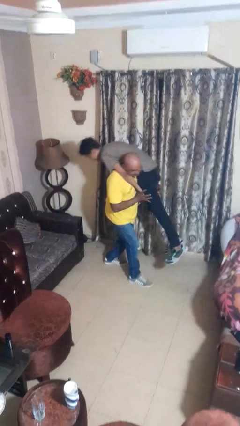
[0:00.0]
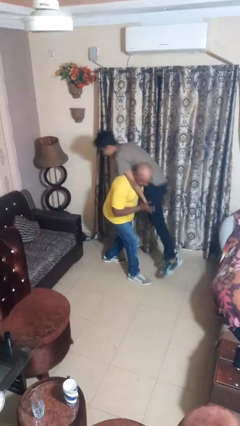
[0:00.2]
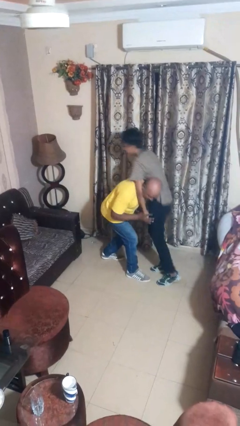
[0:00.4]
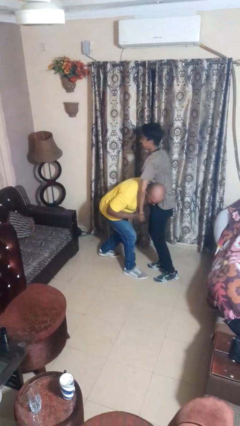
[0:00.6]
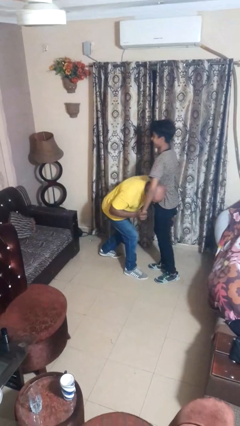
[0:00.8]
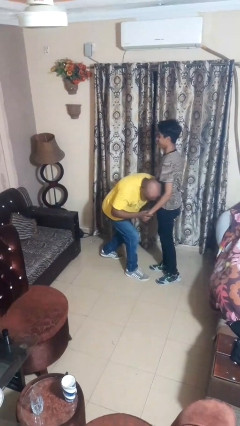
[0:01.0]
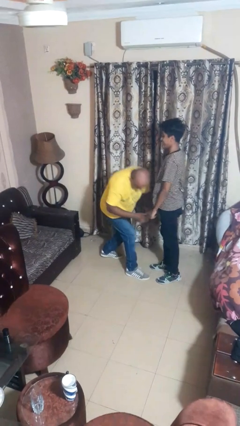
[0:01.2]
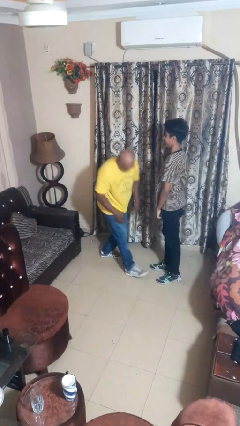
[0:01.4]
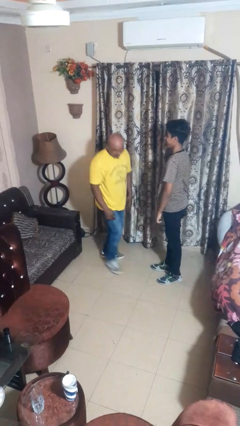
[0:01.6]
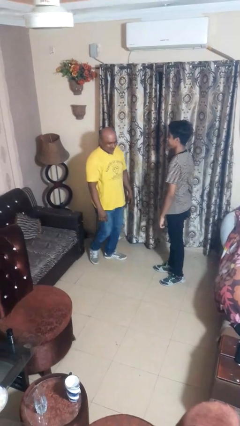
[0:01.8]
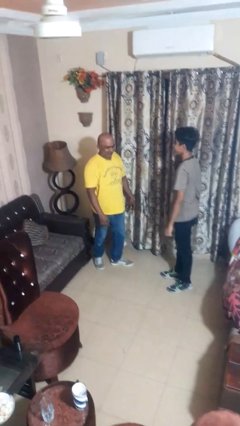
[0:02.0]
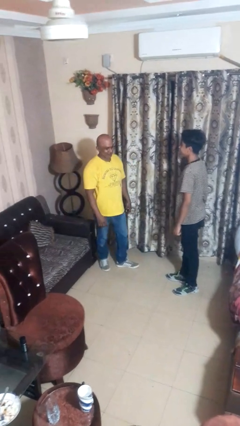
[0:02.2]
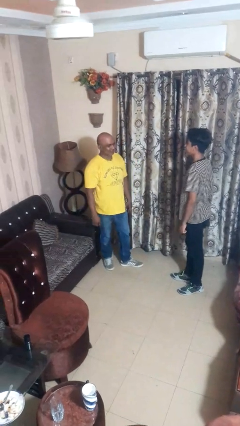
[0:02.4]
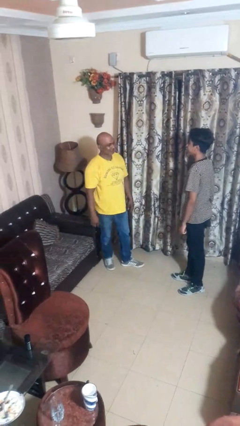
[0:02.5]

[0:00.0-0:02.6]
person puts down person

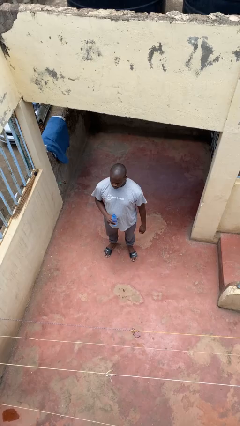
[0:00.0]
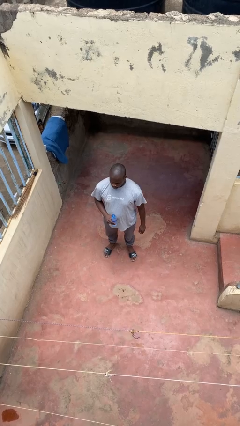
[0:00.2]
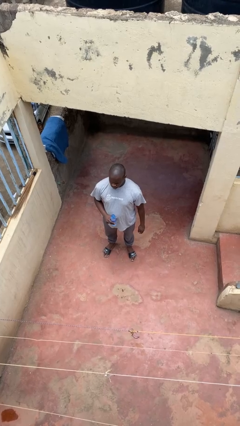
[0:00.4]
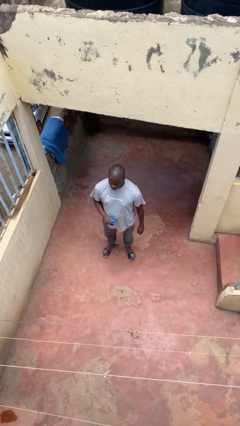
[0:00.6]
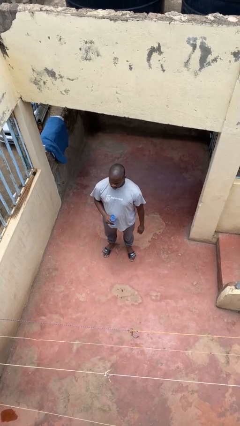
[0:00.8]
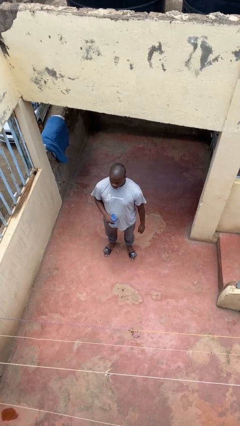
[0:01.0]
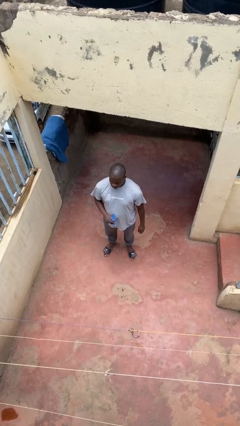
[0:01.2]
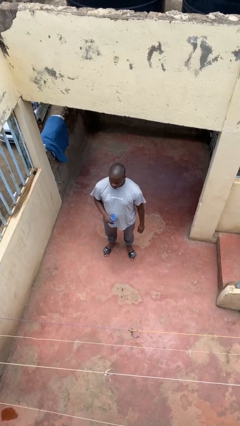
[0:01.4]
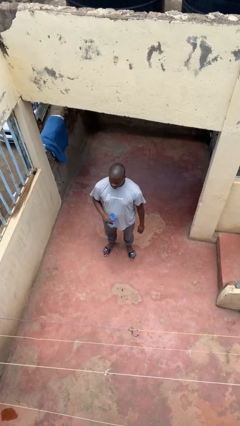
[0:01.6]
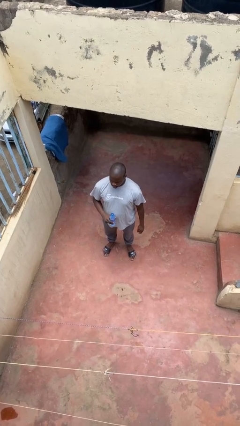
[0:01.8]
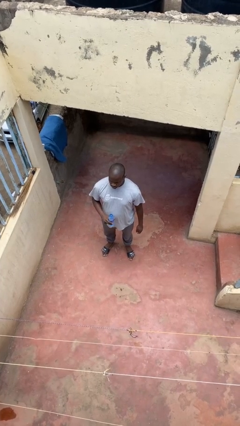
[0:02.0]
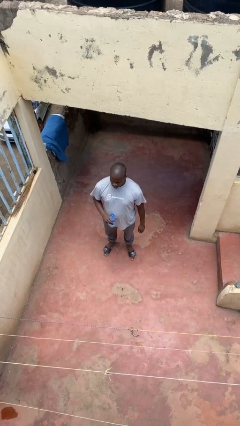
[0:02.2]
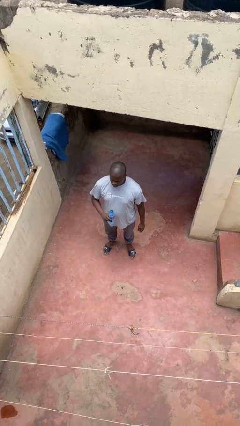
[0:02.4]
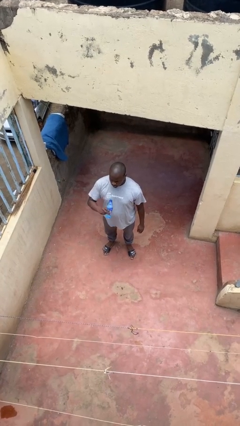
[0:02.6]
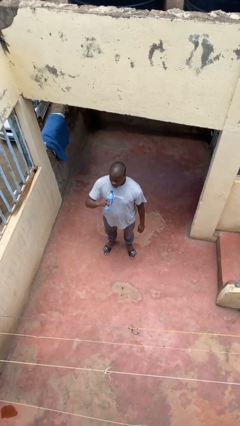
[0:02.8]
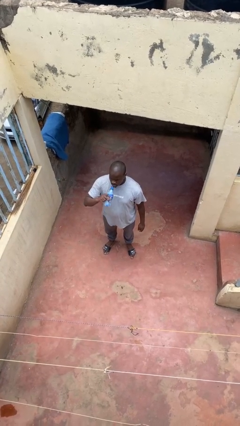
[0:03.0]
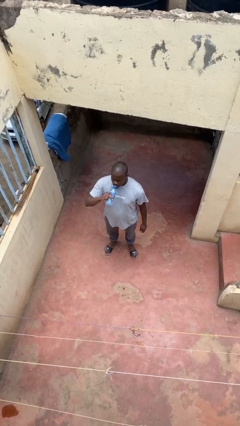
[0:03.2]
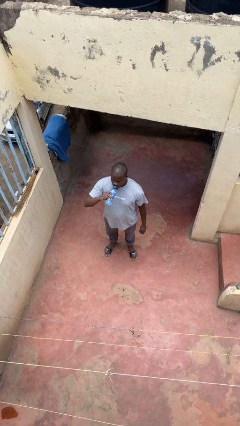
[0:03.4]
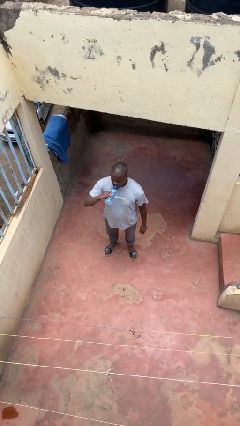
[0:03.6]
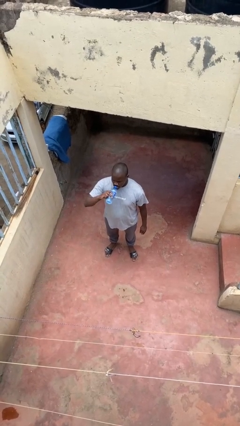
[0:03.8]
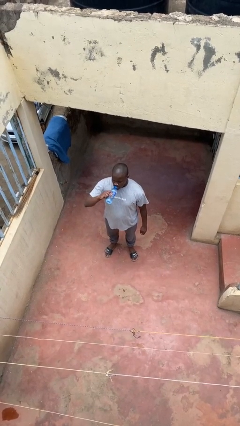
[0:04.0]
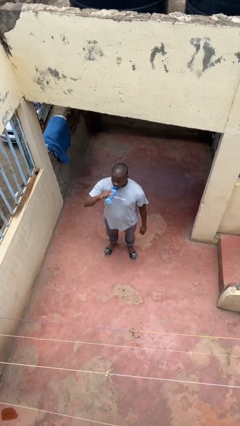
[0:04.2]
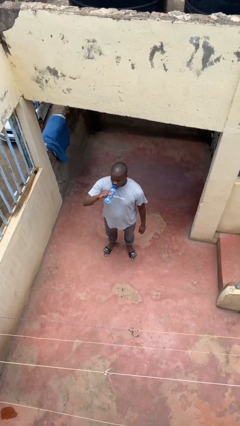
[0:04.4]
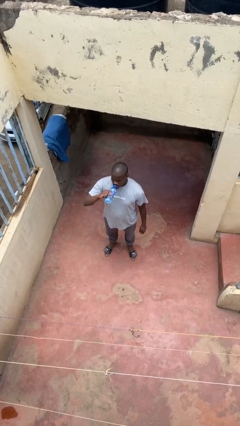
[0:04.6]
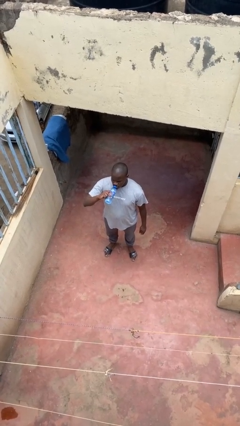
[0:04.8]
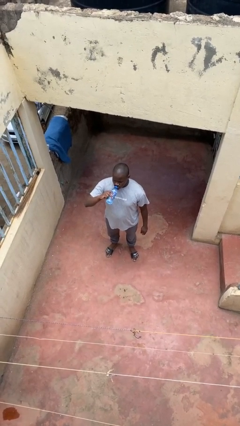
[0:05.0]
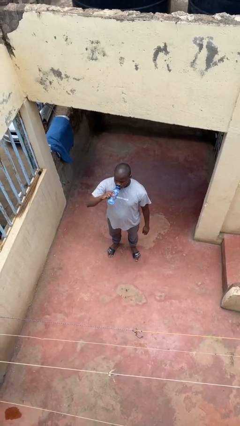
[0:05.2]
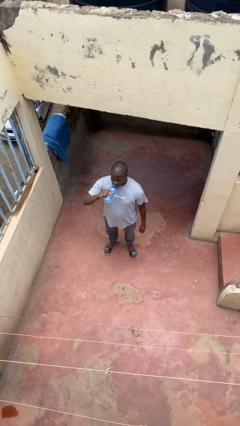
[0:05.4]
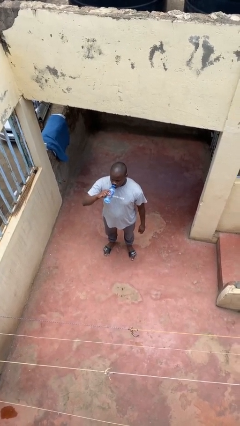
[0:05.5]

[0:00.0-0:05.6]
person drinks from bottle

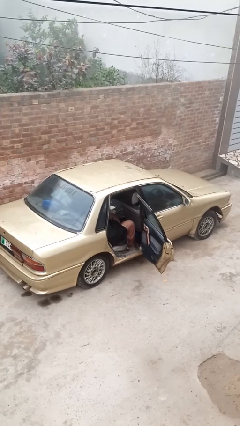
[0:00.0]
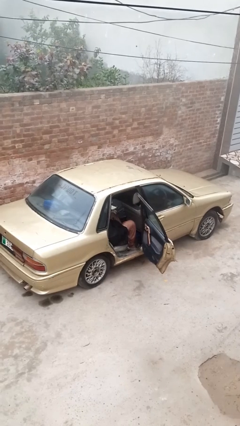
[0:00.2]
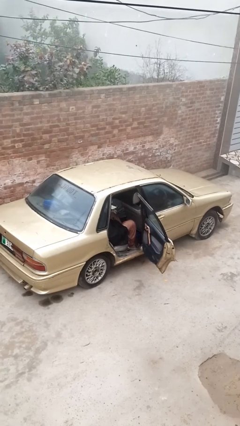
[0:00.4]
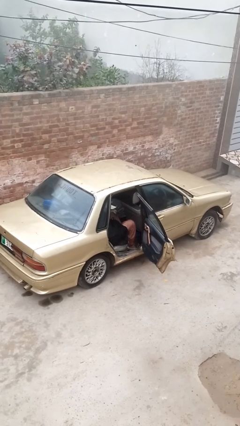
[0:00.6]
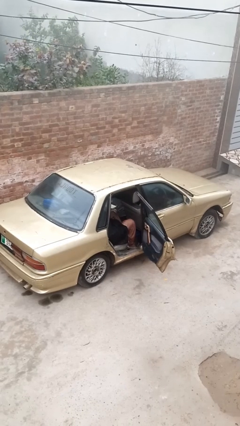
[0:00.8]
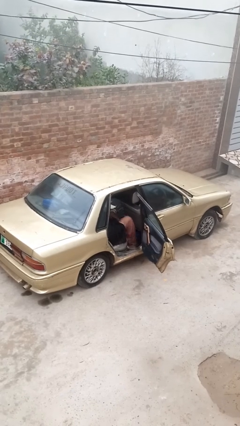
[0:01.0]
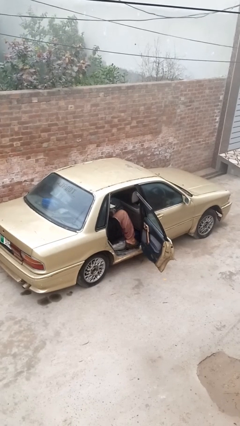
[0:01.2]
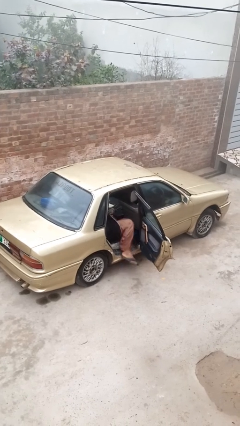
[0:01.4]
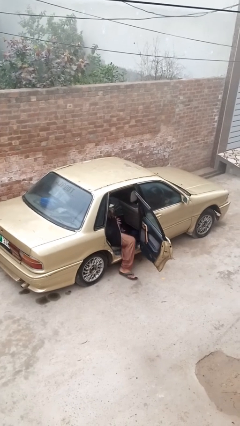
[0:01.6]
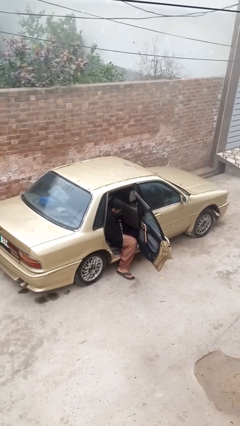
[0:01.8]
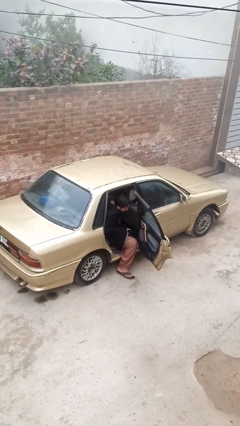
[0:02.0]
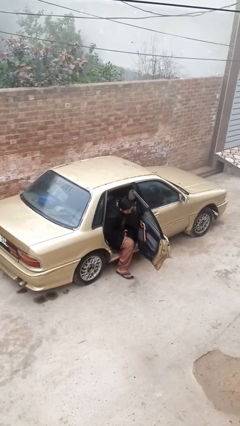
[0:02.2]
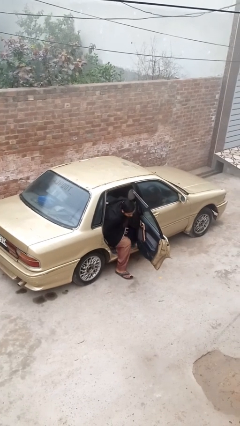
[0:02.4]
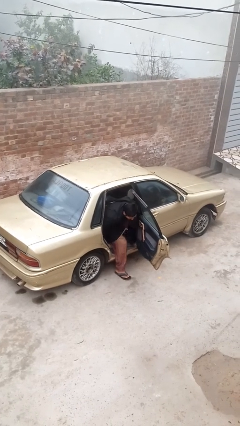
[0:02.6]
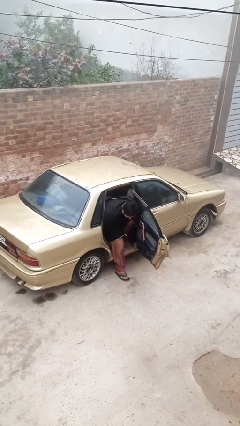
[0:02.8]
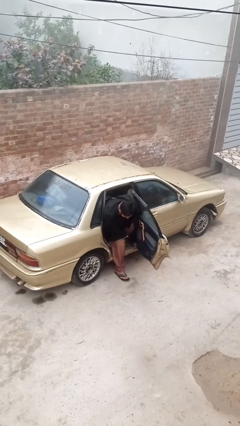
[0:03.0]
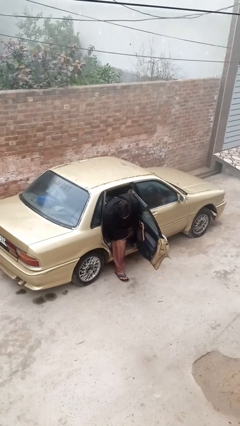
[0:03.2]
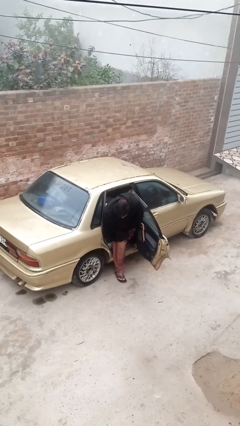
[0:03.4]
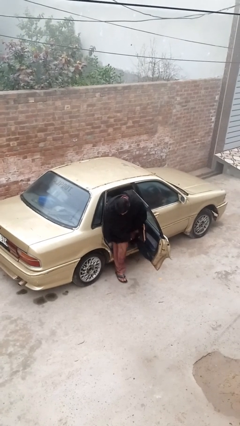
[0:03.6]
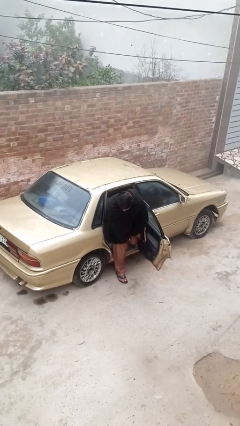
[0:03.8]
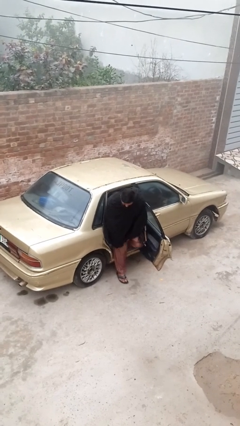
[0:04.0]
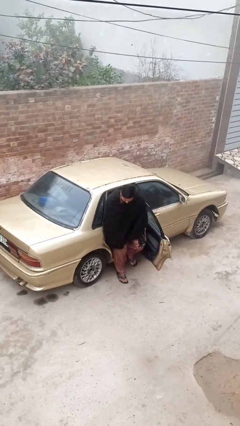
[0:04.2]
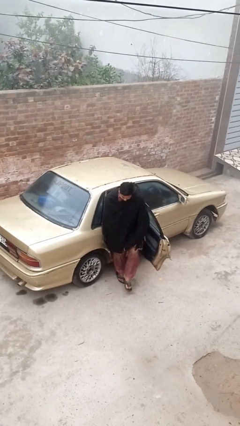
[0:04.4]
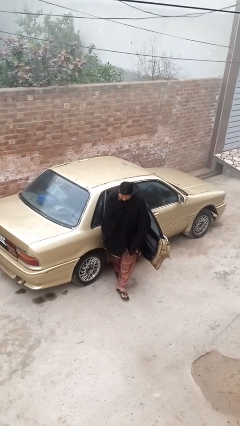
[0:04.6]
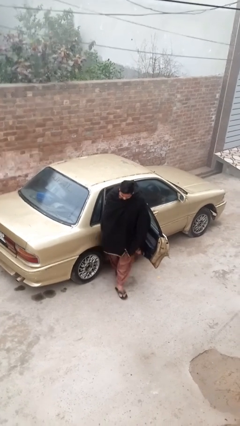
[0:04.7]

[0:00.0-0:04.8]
person exits car

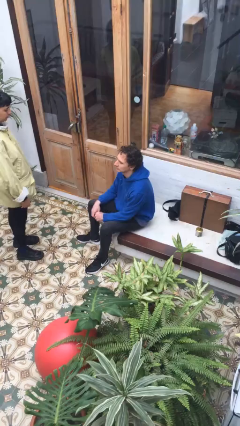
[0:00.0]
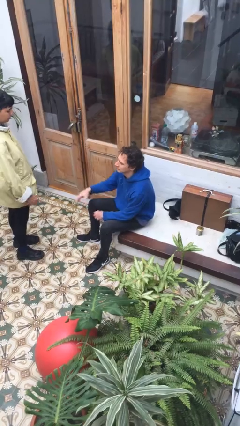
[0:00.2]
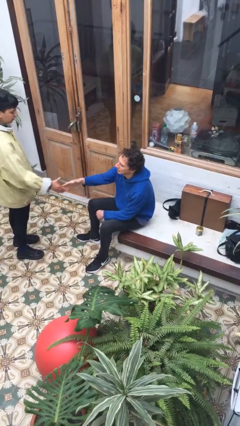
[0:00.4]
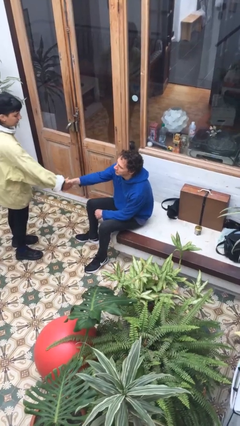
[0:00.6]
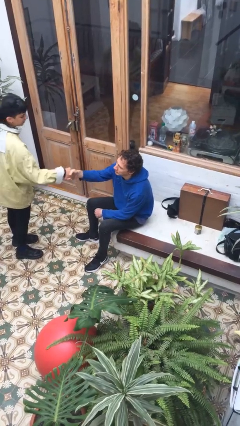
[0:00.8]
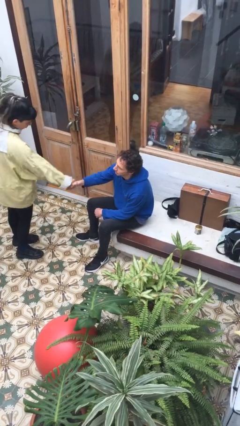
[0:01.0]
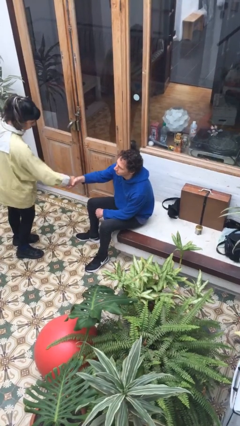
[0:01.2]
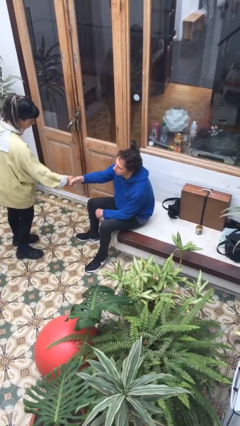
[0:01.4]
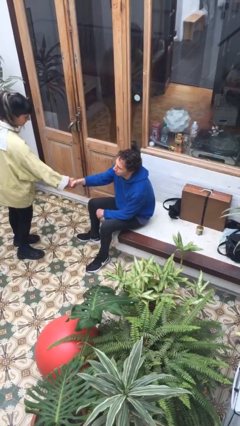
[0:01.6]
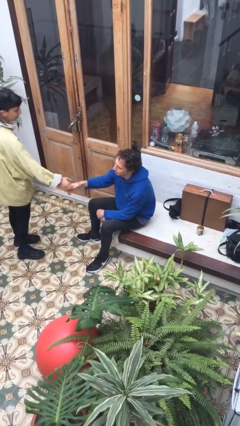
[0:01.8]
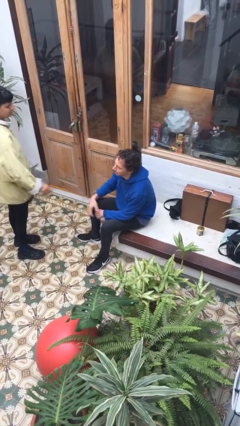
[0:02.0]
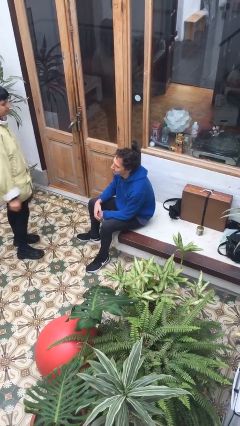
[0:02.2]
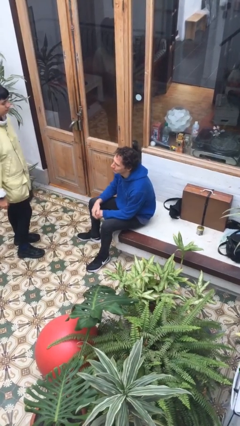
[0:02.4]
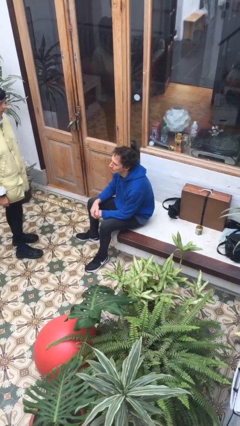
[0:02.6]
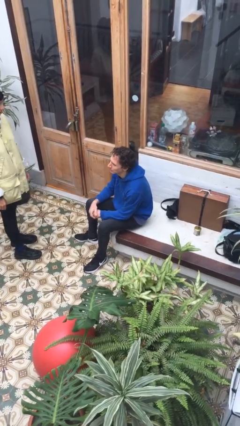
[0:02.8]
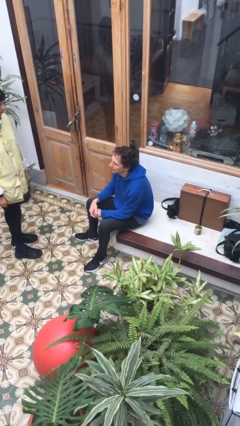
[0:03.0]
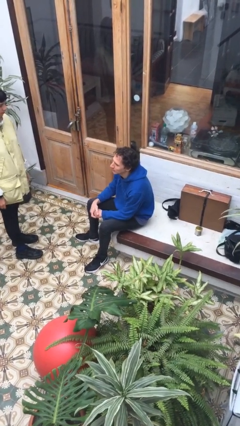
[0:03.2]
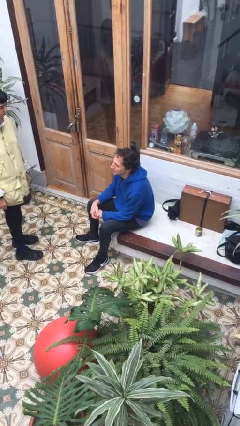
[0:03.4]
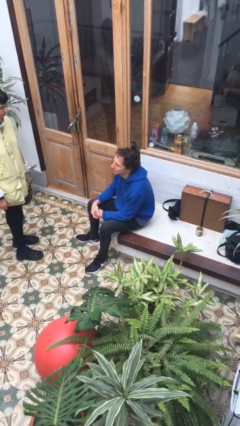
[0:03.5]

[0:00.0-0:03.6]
person shakes hand

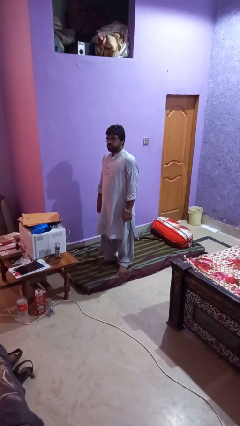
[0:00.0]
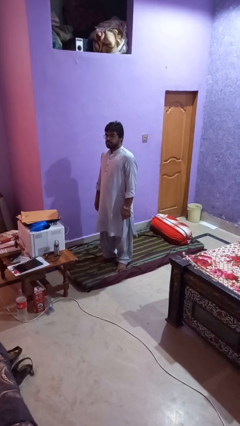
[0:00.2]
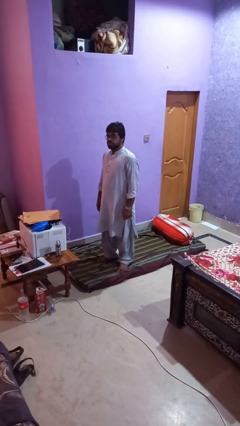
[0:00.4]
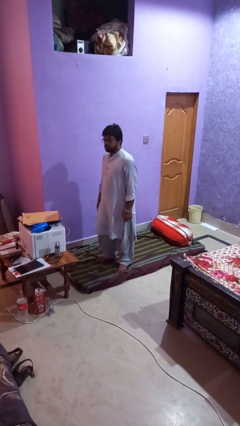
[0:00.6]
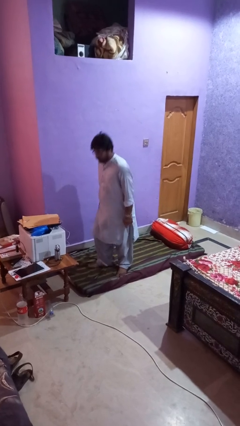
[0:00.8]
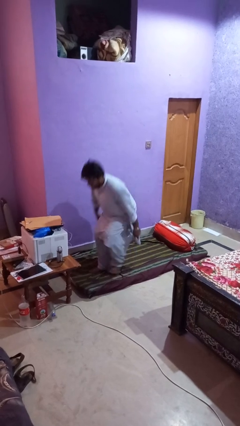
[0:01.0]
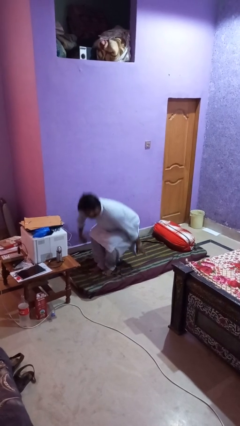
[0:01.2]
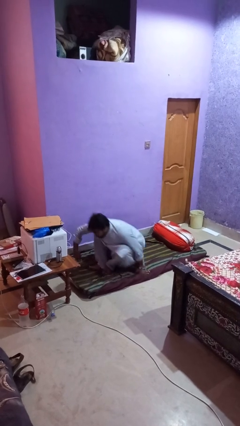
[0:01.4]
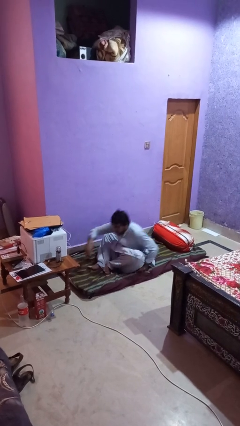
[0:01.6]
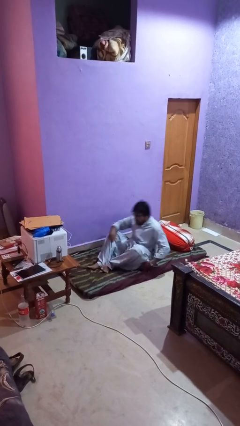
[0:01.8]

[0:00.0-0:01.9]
person lies down on bed
